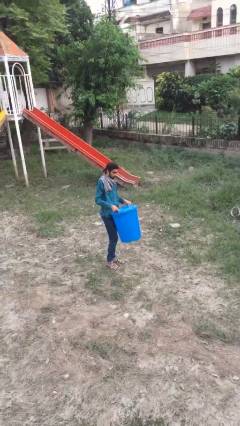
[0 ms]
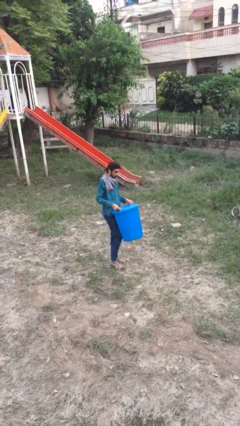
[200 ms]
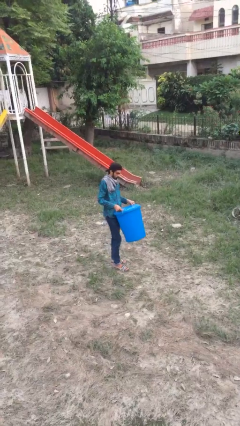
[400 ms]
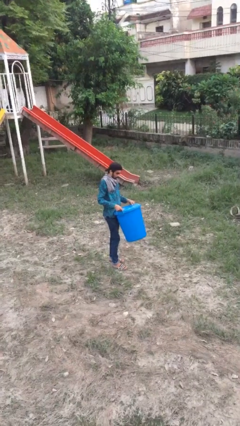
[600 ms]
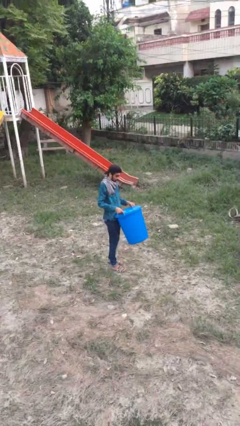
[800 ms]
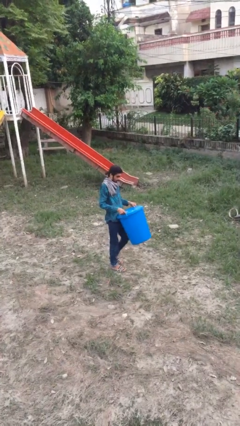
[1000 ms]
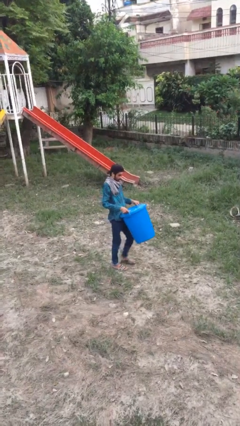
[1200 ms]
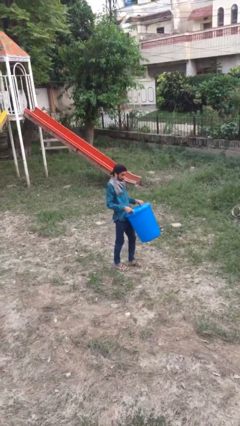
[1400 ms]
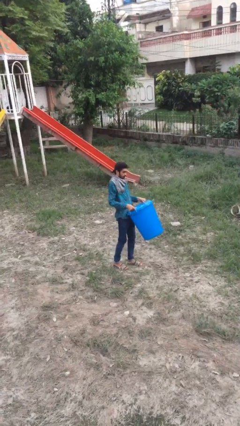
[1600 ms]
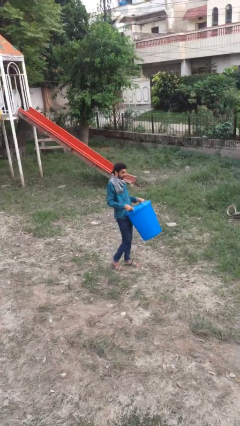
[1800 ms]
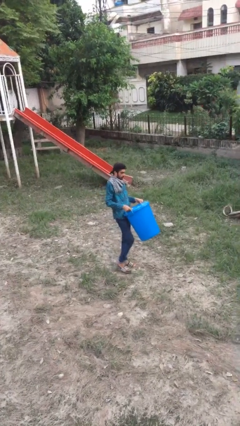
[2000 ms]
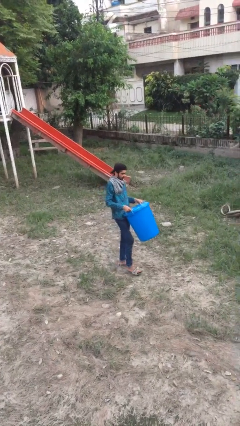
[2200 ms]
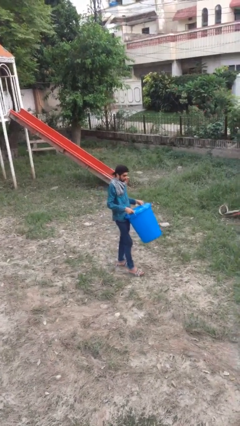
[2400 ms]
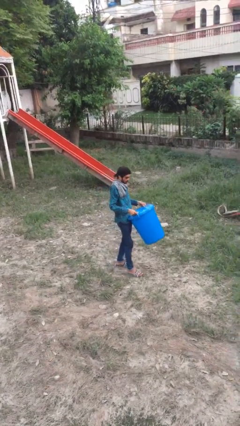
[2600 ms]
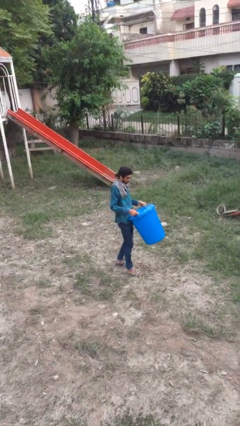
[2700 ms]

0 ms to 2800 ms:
person carries heavy object

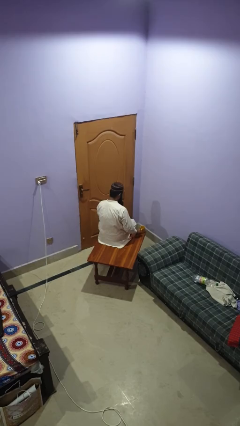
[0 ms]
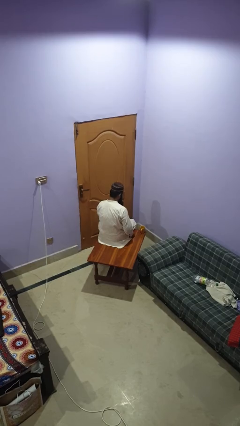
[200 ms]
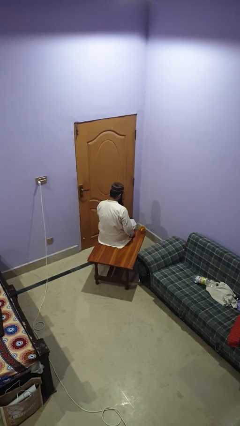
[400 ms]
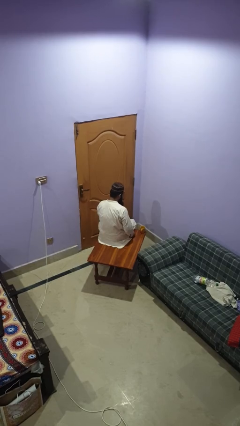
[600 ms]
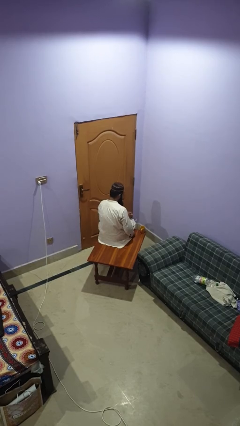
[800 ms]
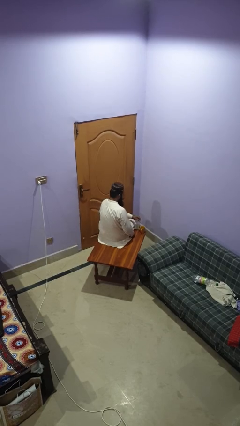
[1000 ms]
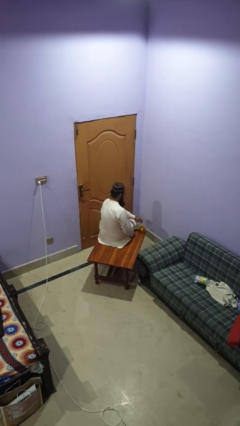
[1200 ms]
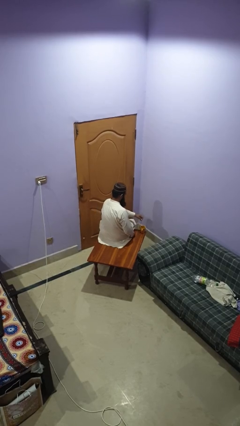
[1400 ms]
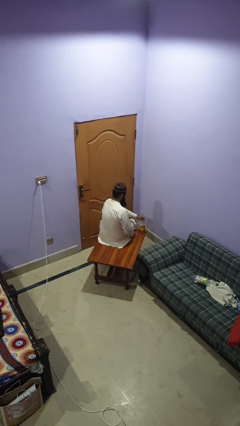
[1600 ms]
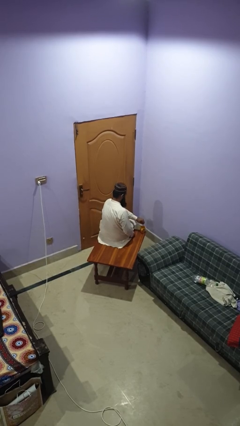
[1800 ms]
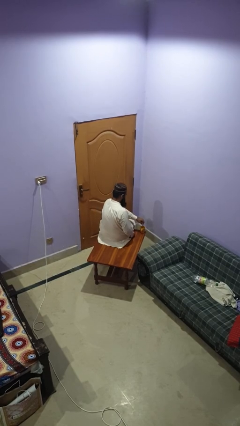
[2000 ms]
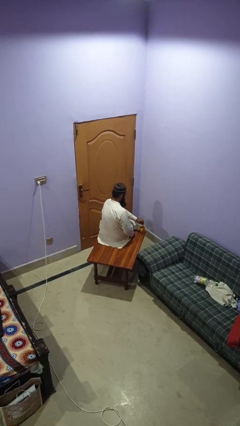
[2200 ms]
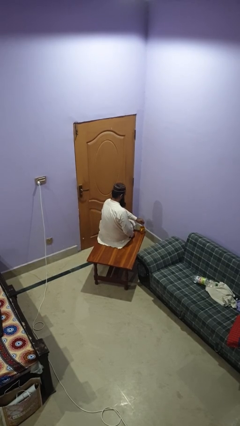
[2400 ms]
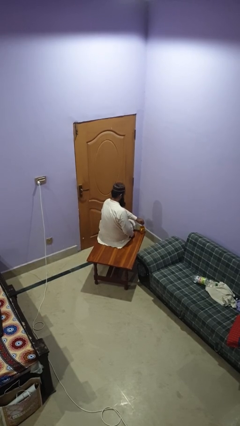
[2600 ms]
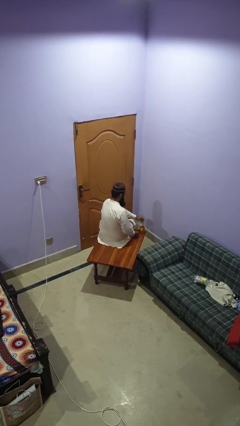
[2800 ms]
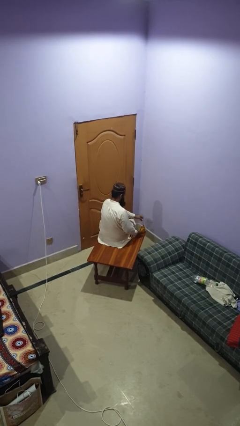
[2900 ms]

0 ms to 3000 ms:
person stirs mug

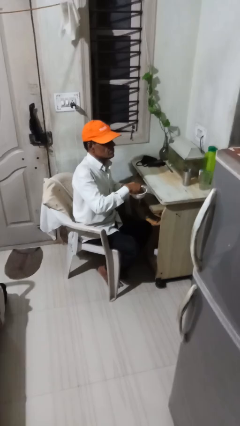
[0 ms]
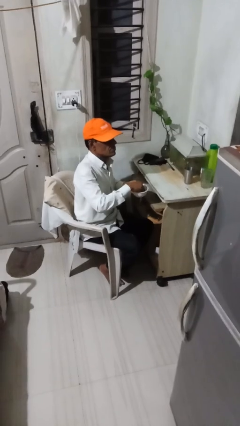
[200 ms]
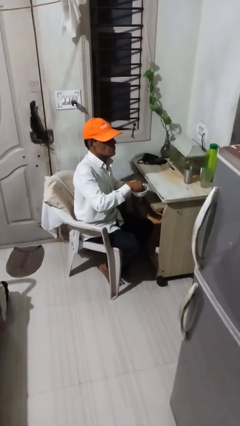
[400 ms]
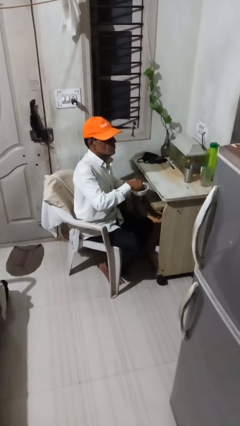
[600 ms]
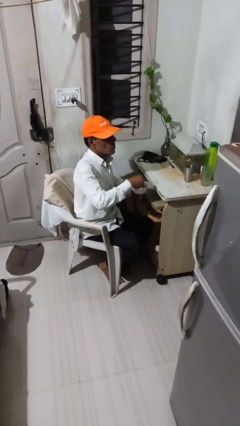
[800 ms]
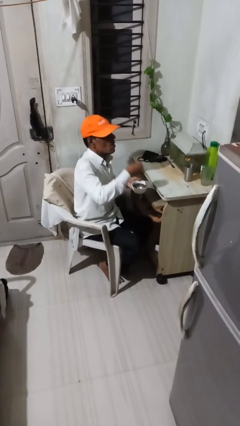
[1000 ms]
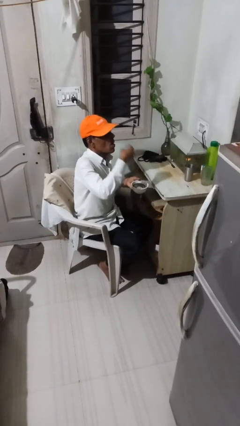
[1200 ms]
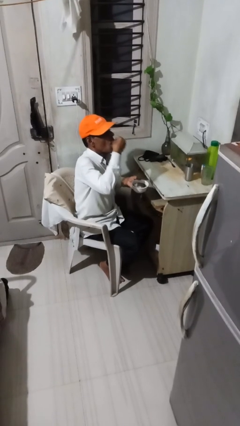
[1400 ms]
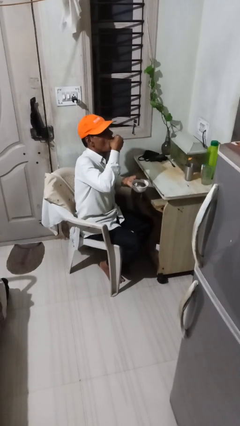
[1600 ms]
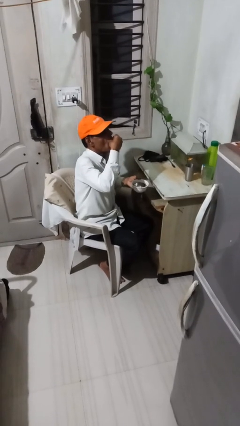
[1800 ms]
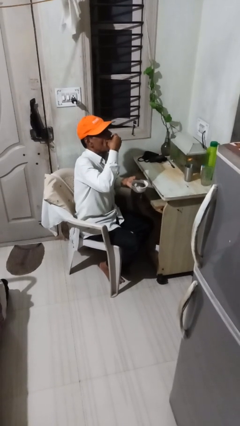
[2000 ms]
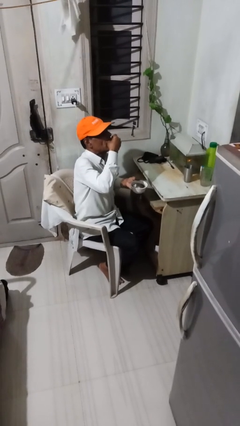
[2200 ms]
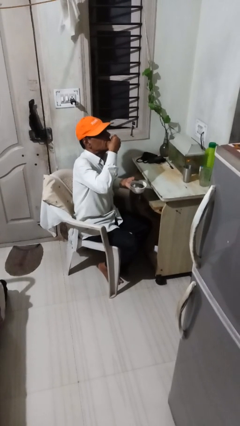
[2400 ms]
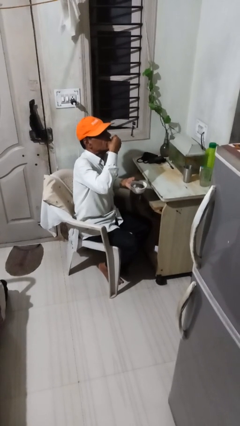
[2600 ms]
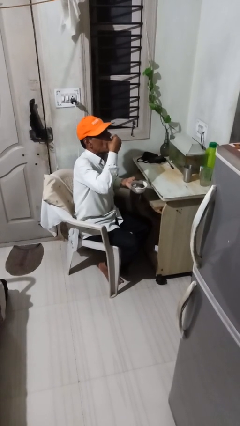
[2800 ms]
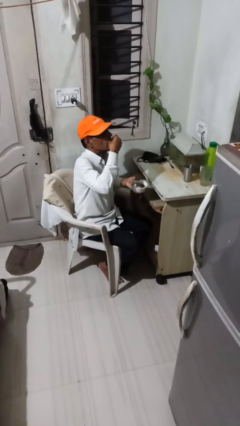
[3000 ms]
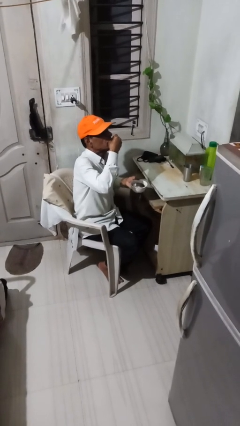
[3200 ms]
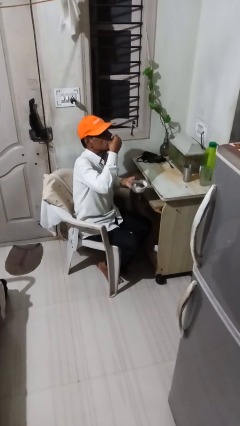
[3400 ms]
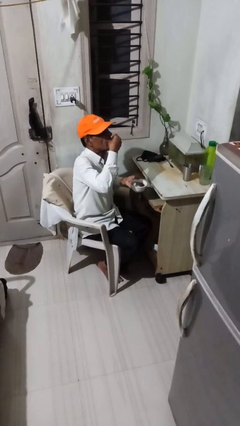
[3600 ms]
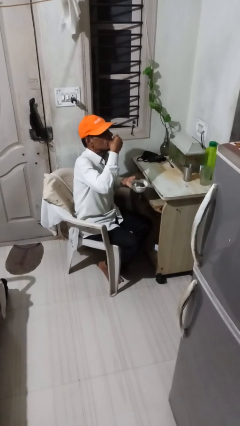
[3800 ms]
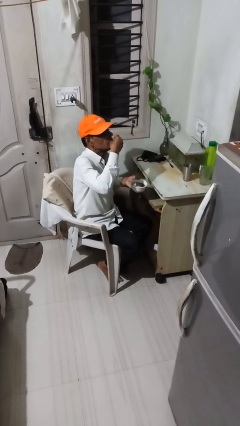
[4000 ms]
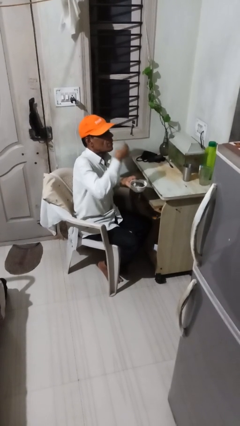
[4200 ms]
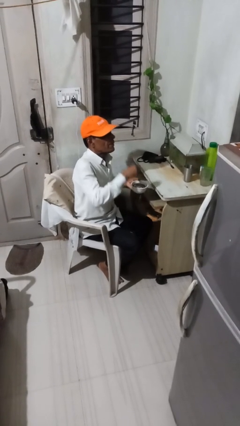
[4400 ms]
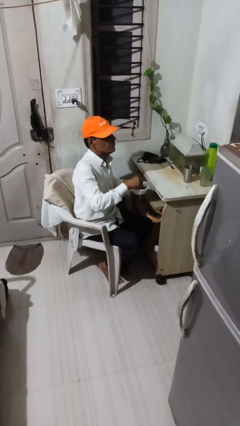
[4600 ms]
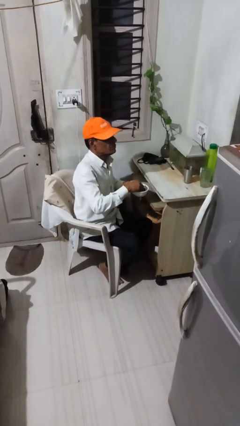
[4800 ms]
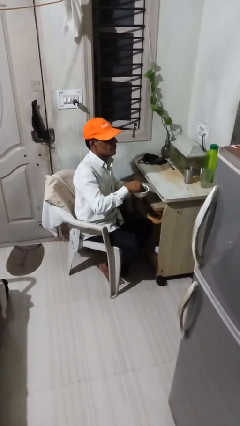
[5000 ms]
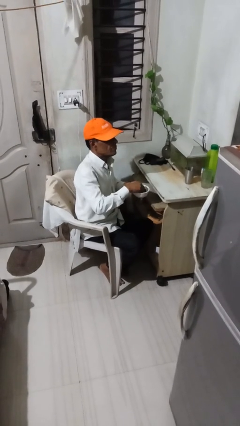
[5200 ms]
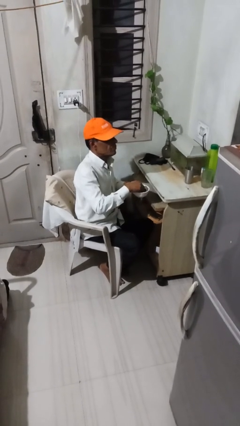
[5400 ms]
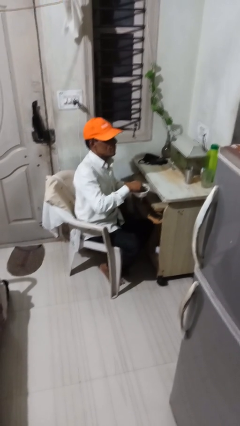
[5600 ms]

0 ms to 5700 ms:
person eats with hands

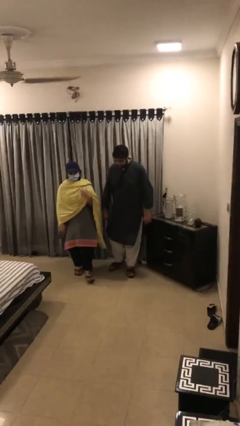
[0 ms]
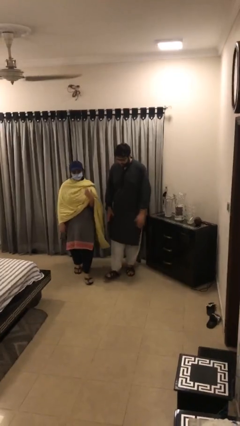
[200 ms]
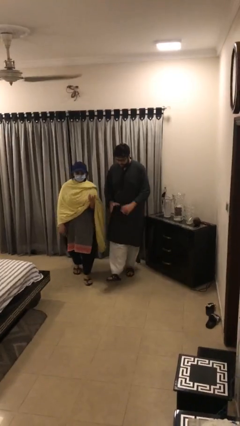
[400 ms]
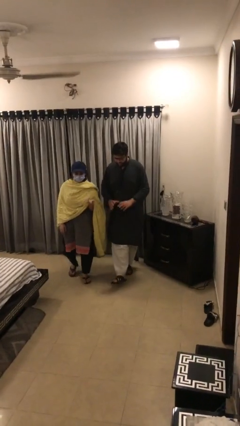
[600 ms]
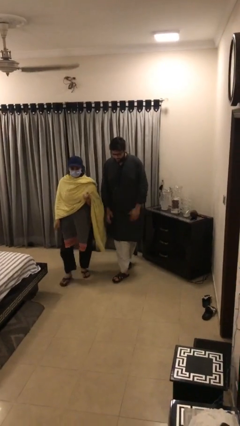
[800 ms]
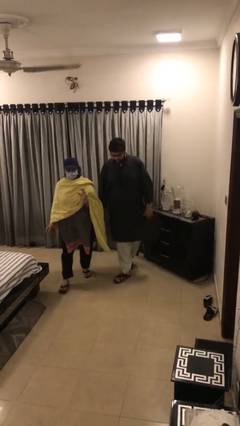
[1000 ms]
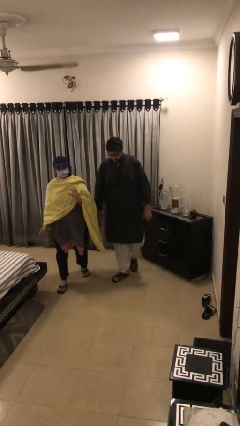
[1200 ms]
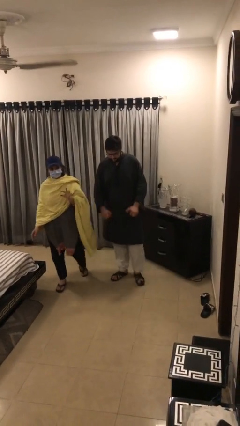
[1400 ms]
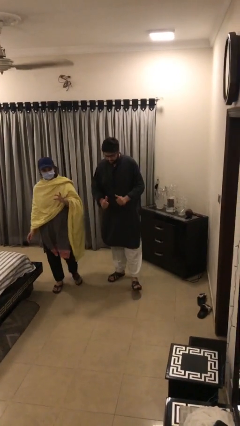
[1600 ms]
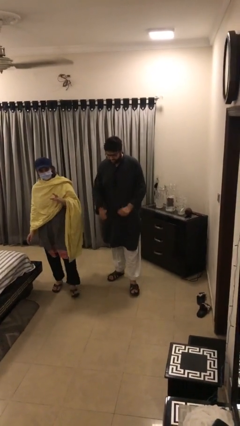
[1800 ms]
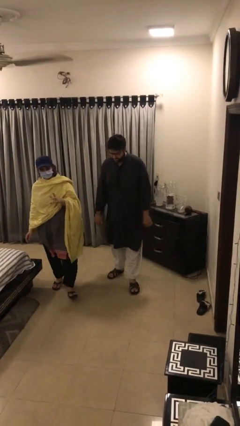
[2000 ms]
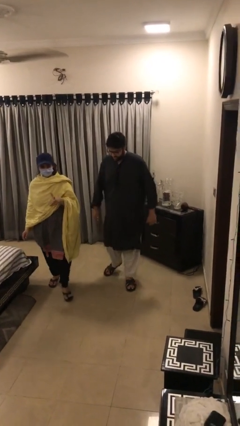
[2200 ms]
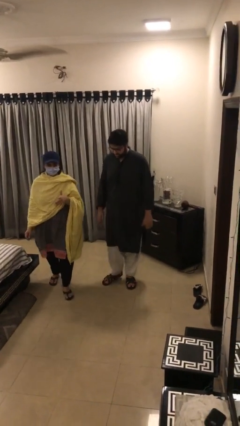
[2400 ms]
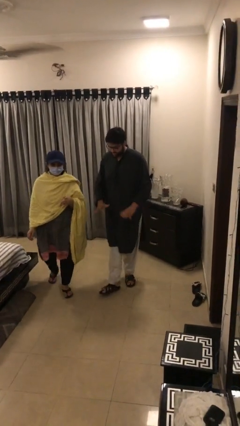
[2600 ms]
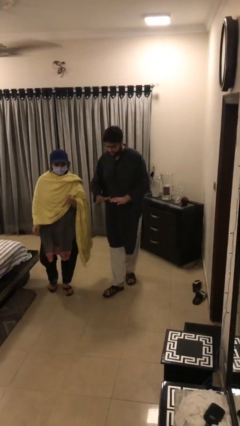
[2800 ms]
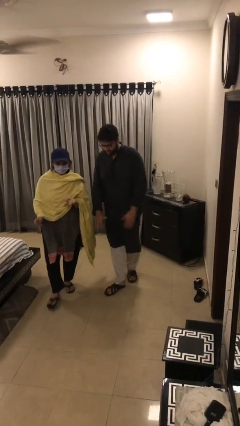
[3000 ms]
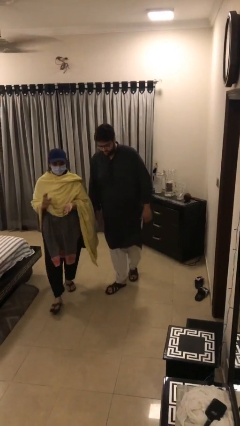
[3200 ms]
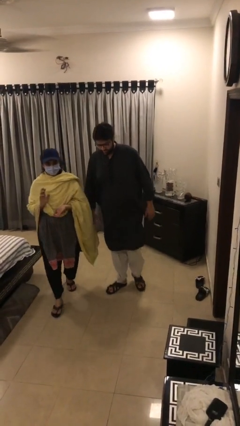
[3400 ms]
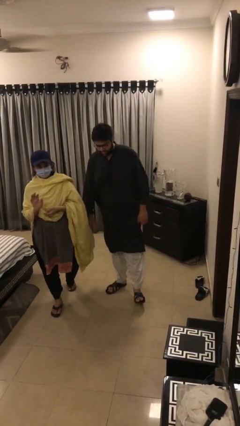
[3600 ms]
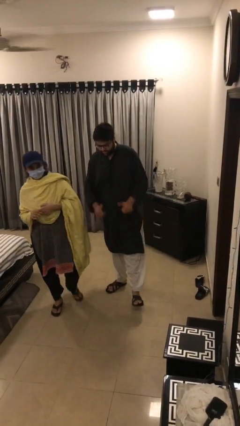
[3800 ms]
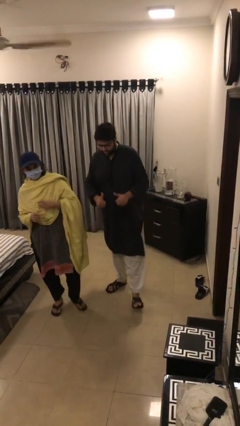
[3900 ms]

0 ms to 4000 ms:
person talks to person

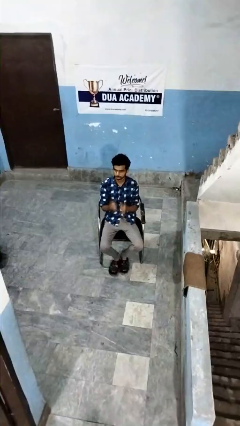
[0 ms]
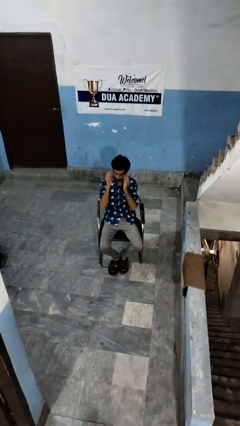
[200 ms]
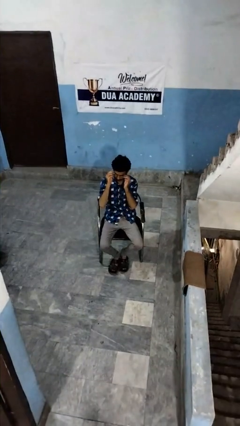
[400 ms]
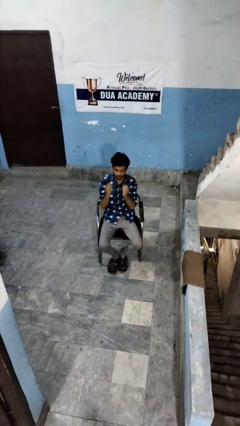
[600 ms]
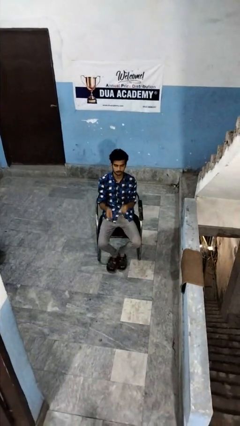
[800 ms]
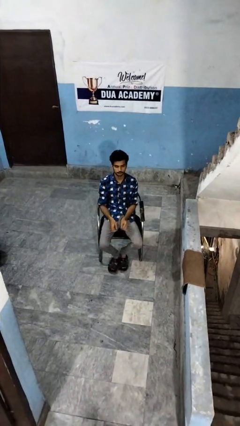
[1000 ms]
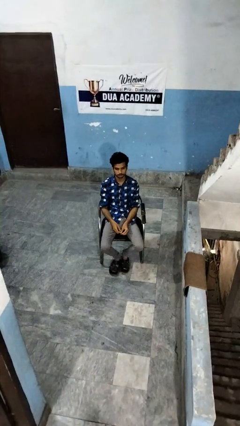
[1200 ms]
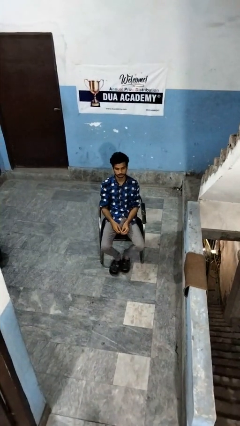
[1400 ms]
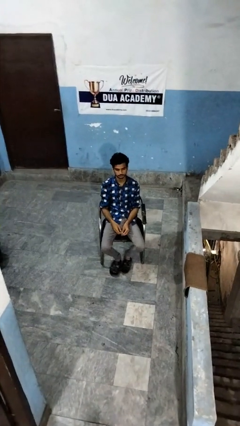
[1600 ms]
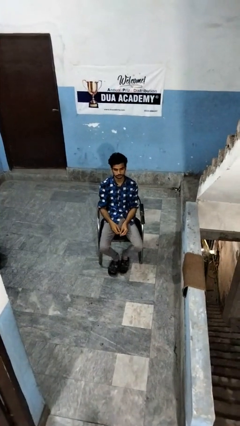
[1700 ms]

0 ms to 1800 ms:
person takes off glasses

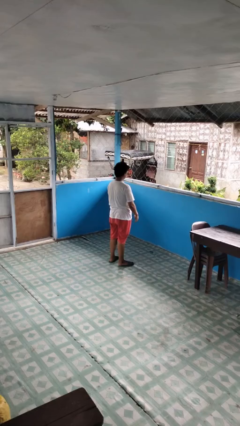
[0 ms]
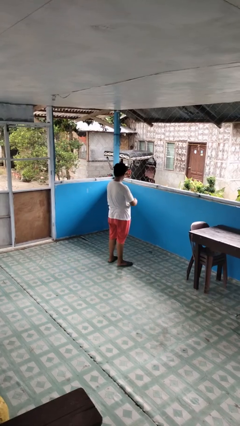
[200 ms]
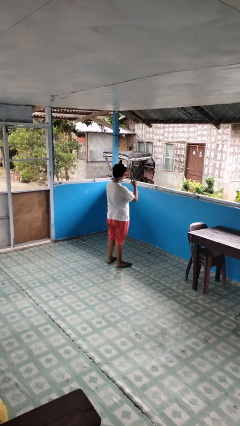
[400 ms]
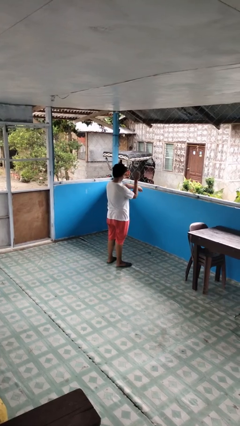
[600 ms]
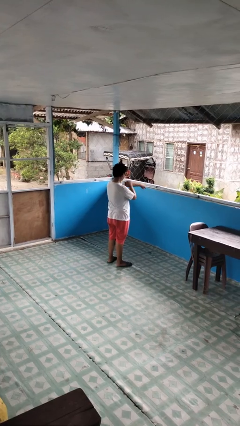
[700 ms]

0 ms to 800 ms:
person swats bug
